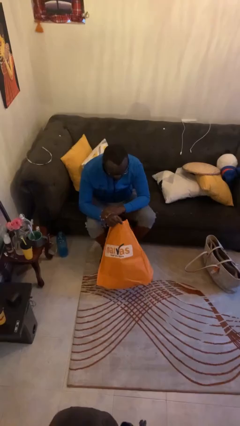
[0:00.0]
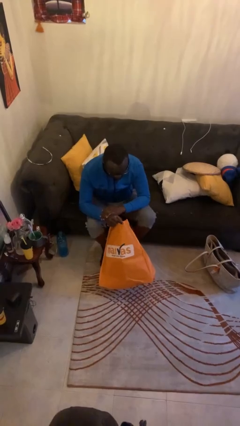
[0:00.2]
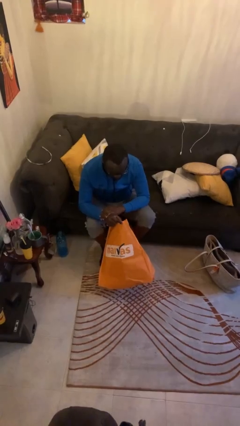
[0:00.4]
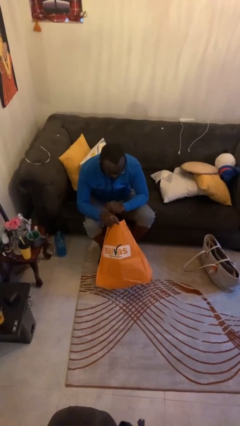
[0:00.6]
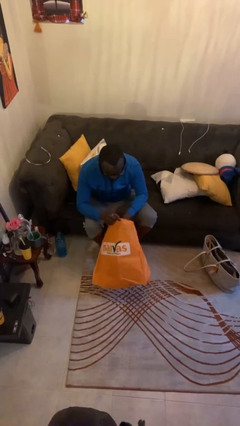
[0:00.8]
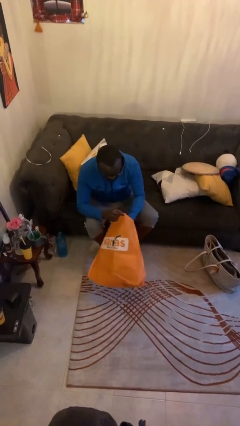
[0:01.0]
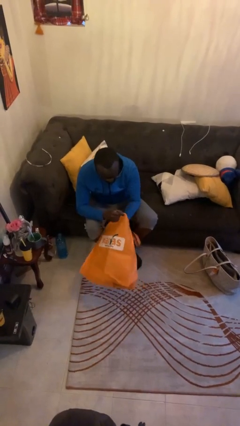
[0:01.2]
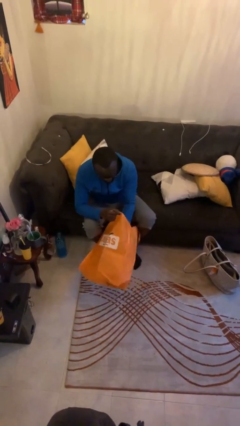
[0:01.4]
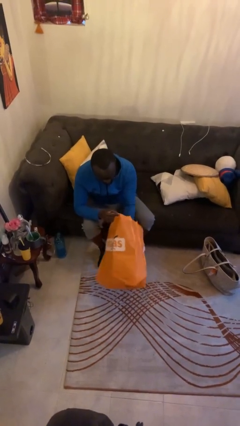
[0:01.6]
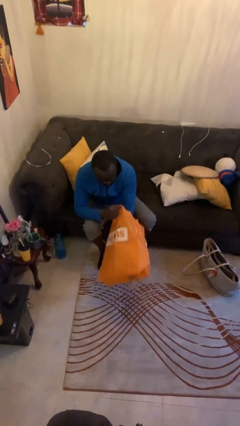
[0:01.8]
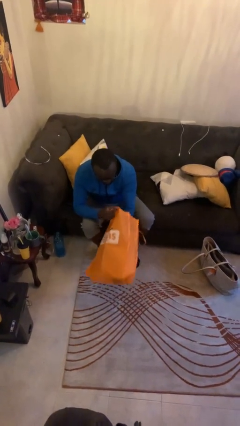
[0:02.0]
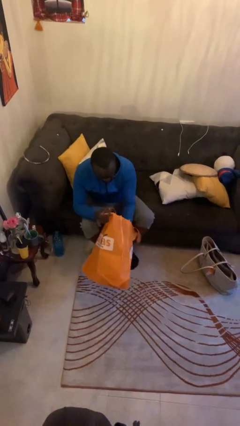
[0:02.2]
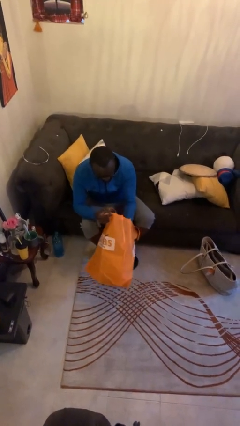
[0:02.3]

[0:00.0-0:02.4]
person searches in bag

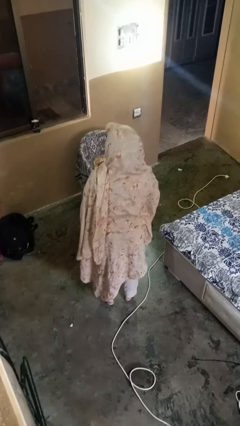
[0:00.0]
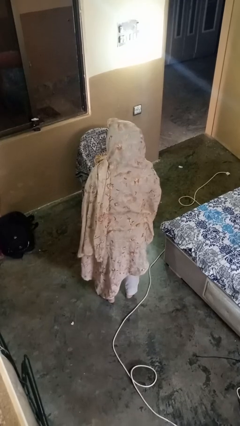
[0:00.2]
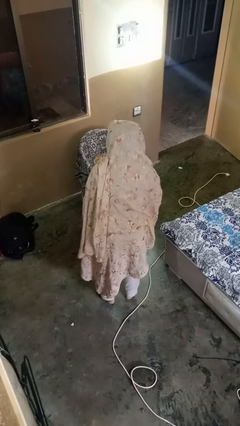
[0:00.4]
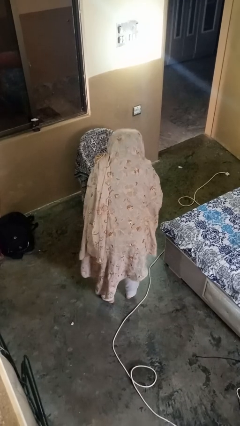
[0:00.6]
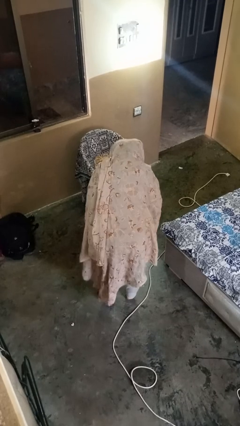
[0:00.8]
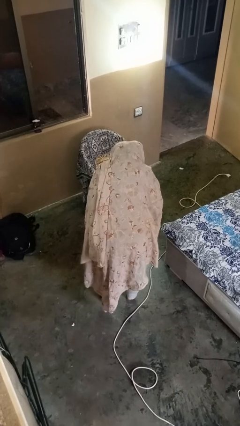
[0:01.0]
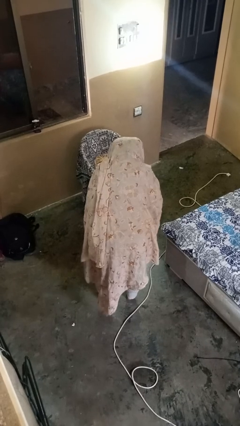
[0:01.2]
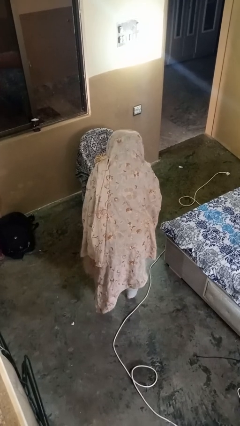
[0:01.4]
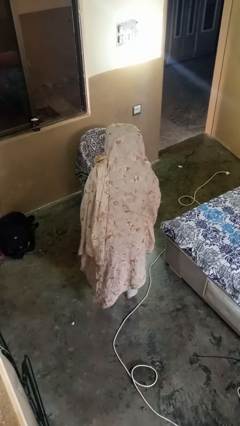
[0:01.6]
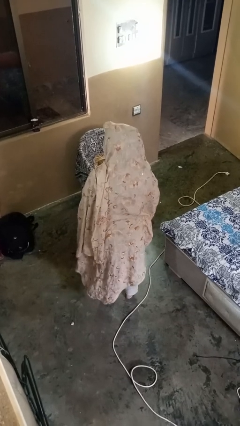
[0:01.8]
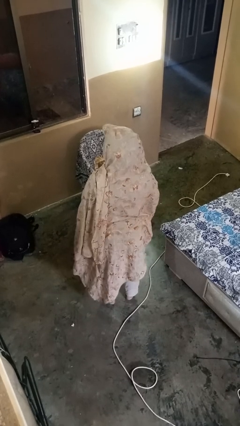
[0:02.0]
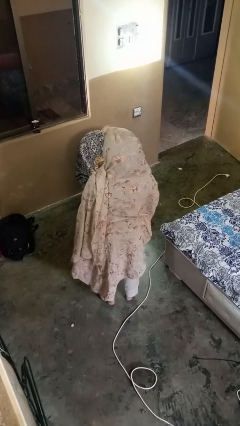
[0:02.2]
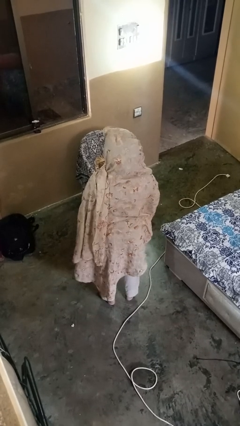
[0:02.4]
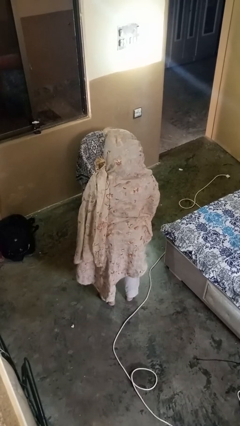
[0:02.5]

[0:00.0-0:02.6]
person bows

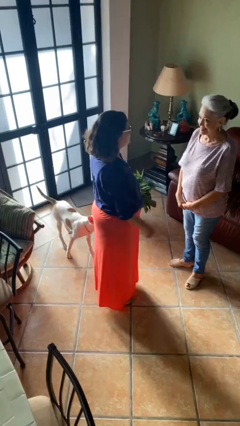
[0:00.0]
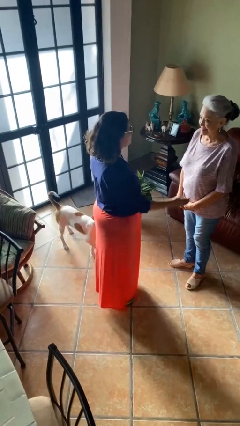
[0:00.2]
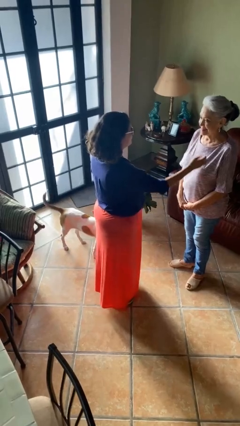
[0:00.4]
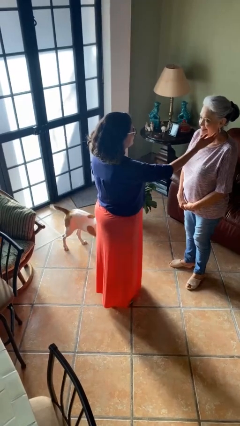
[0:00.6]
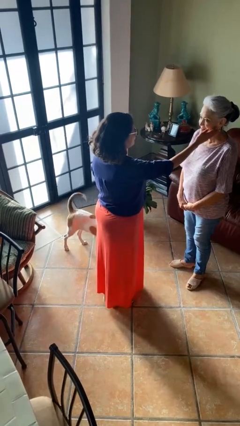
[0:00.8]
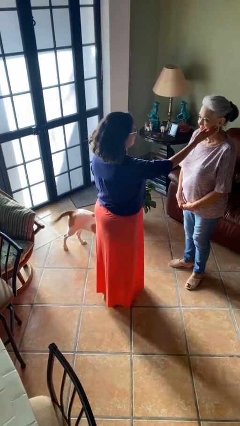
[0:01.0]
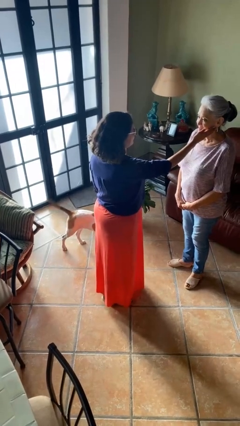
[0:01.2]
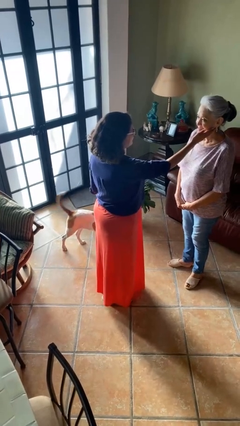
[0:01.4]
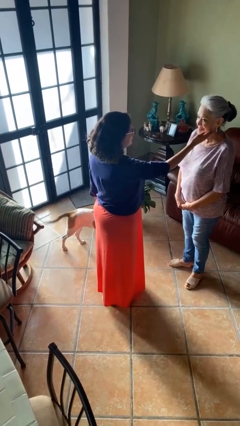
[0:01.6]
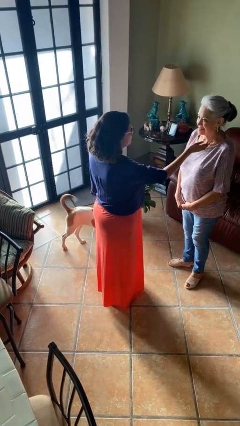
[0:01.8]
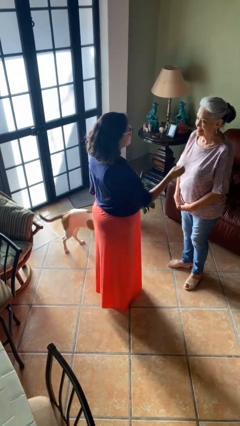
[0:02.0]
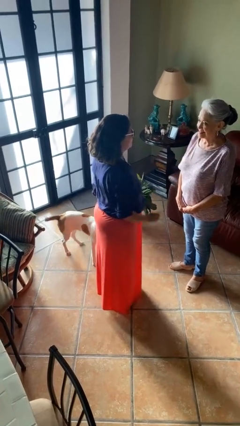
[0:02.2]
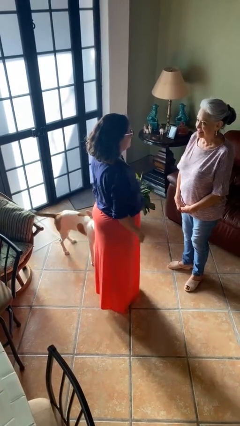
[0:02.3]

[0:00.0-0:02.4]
person touches face of person

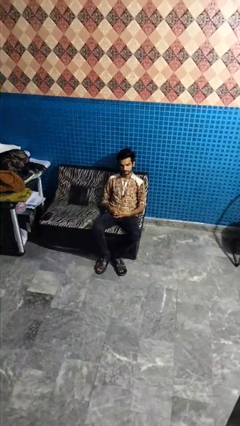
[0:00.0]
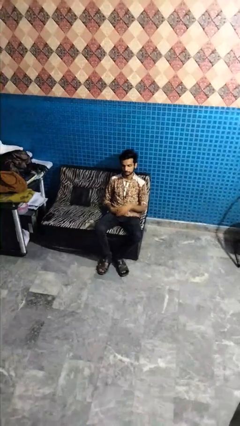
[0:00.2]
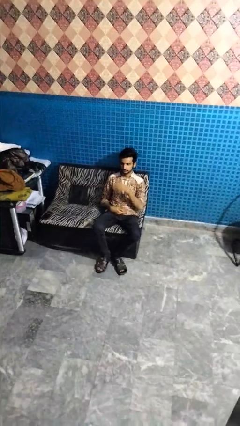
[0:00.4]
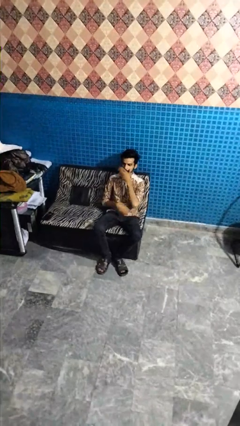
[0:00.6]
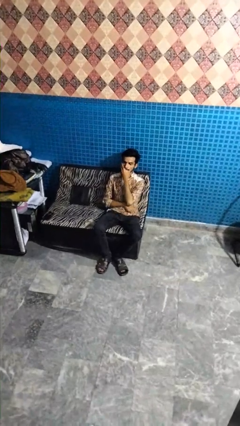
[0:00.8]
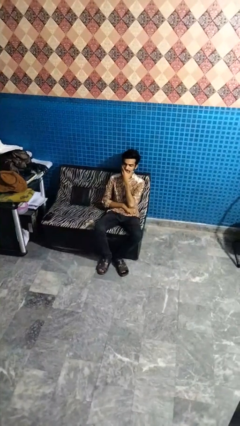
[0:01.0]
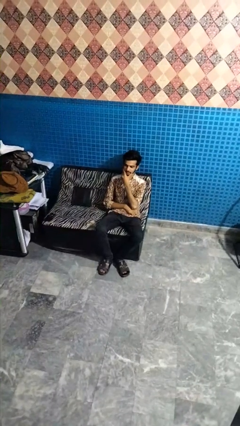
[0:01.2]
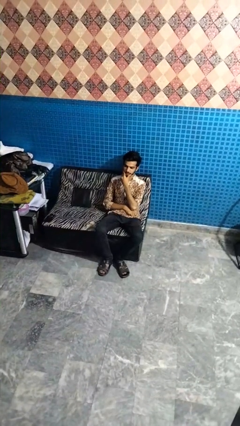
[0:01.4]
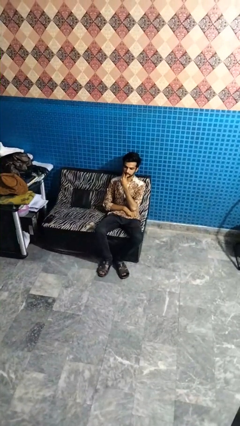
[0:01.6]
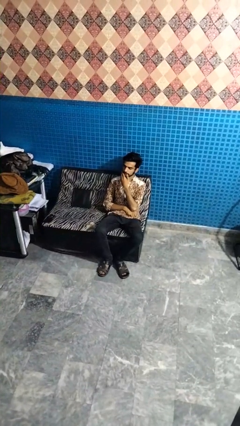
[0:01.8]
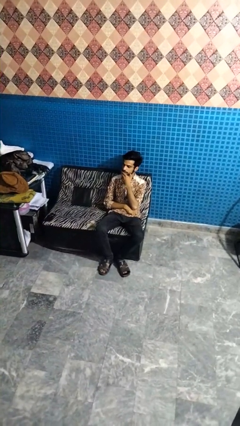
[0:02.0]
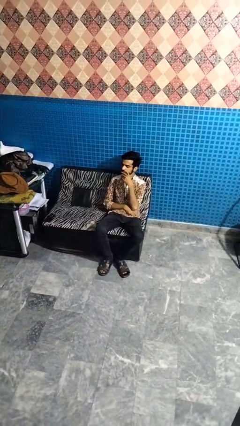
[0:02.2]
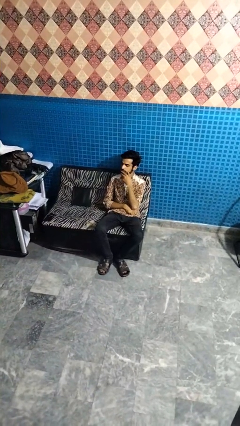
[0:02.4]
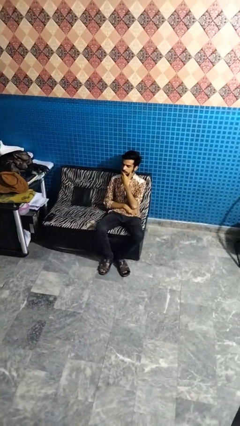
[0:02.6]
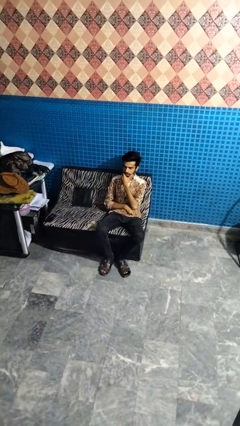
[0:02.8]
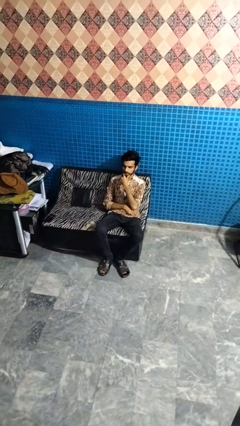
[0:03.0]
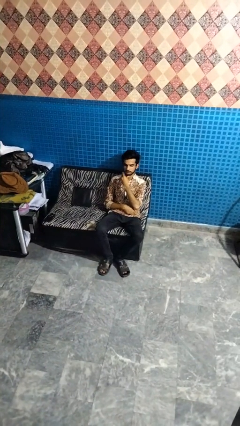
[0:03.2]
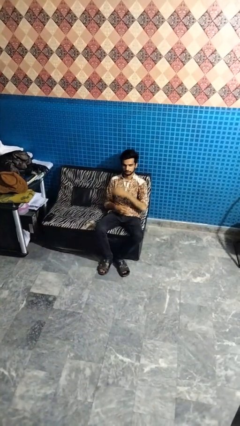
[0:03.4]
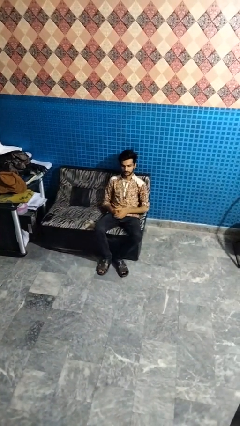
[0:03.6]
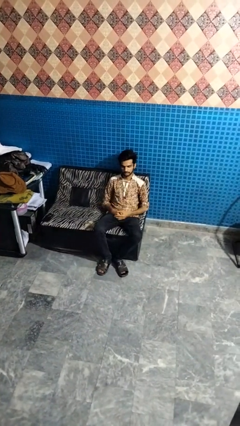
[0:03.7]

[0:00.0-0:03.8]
person strokes chin

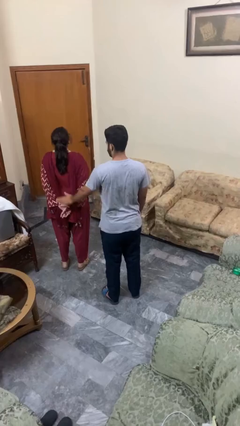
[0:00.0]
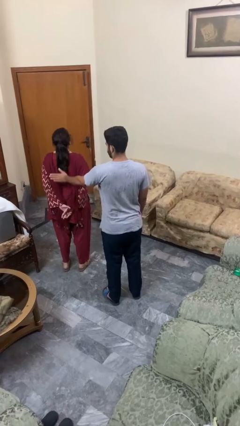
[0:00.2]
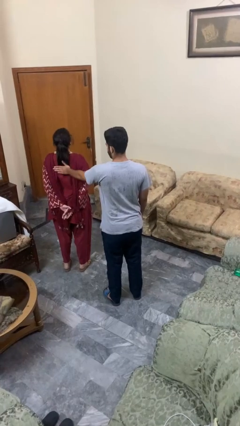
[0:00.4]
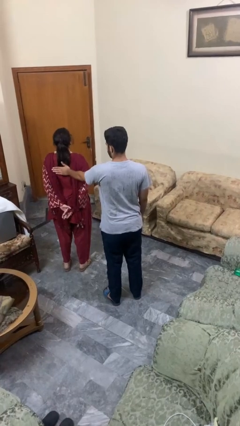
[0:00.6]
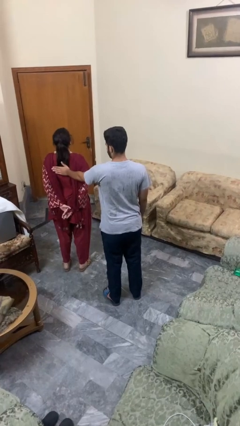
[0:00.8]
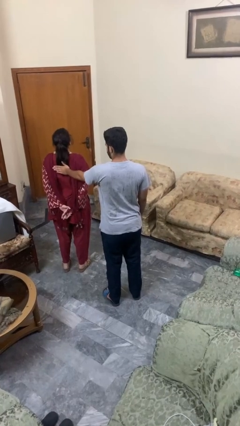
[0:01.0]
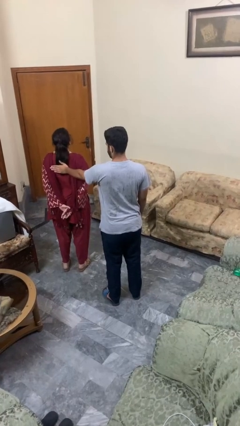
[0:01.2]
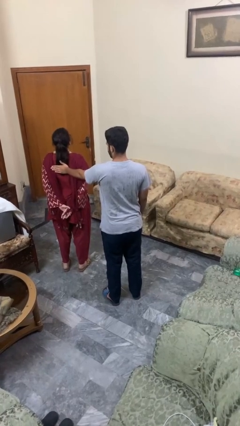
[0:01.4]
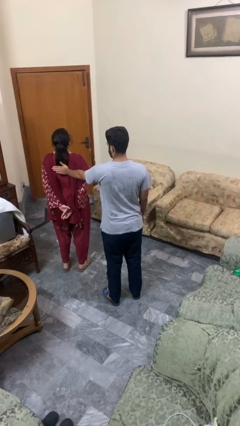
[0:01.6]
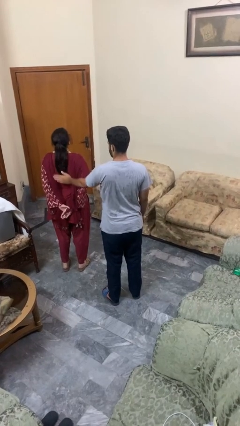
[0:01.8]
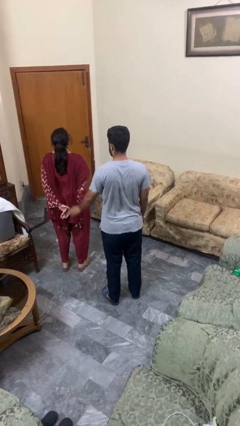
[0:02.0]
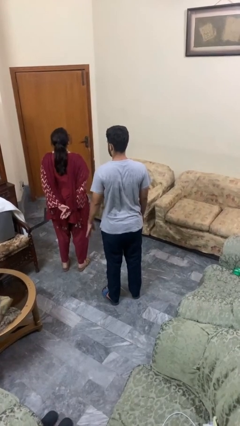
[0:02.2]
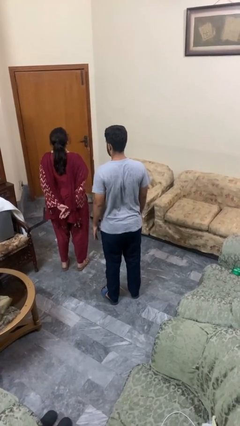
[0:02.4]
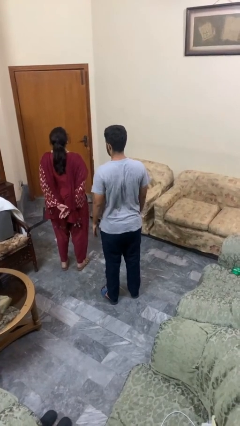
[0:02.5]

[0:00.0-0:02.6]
person touches back of person

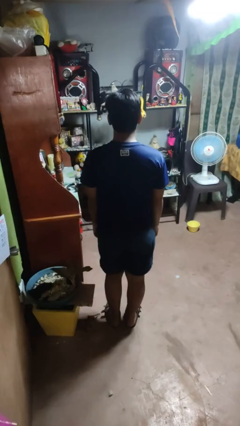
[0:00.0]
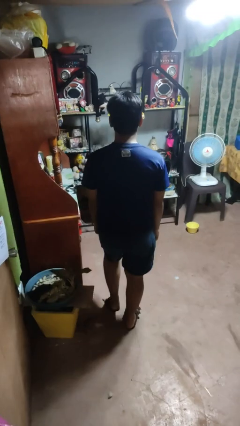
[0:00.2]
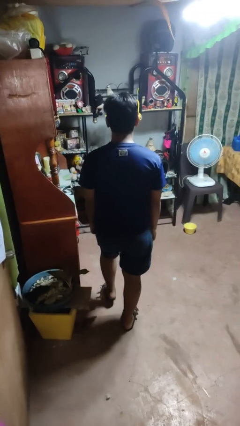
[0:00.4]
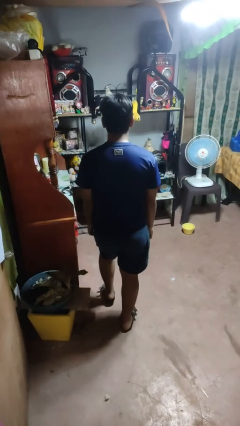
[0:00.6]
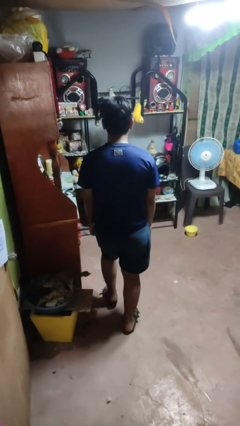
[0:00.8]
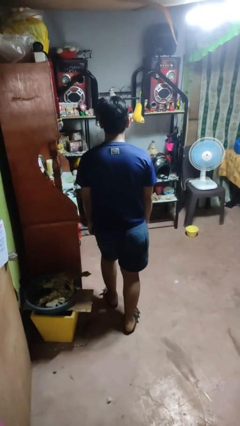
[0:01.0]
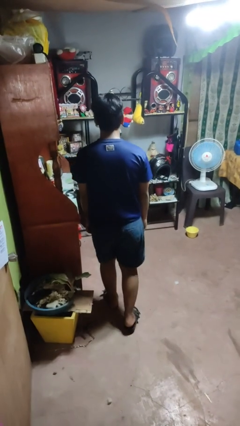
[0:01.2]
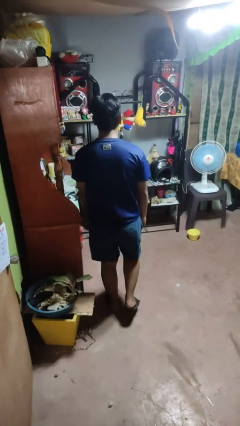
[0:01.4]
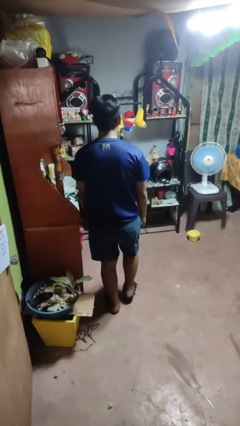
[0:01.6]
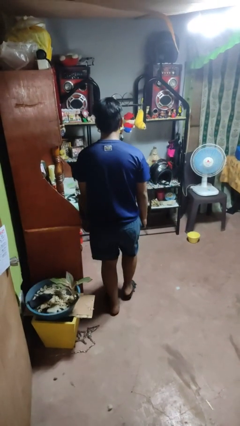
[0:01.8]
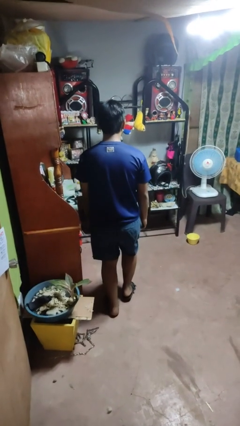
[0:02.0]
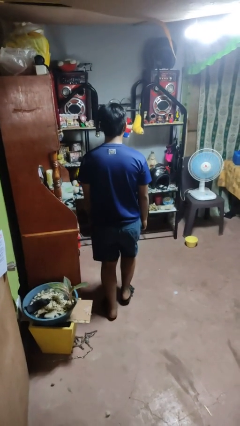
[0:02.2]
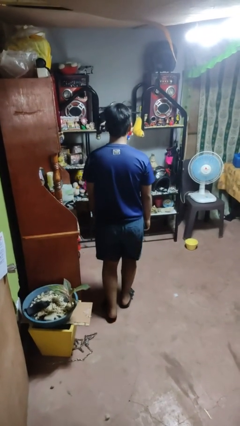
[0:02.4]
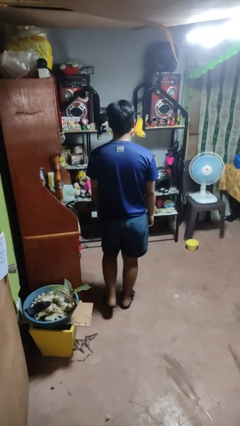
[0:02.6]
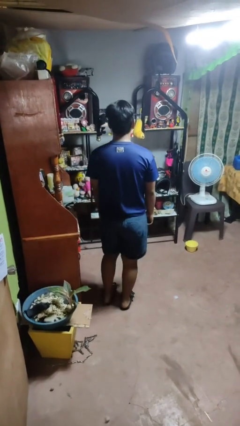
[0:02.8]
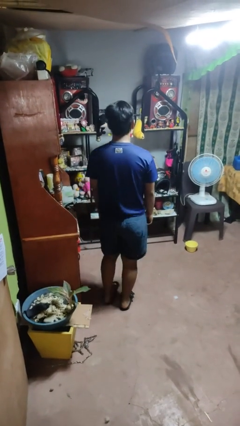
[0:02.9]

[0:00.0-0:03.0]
person walks tiptoe

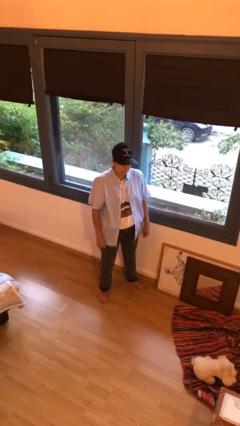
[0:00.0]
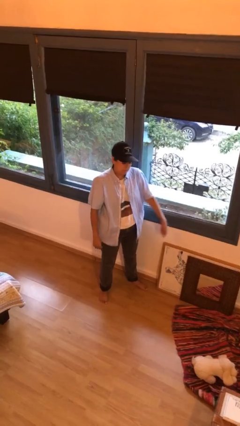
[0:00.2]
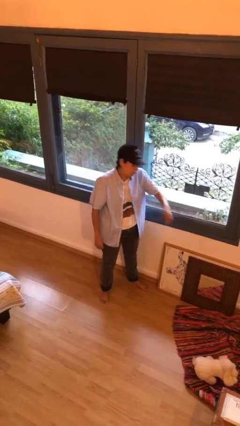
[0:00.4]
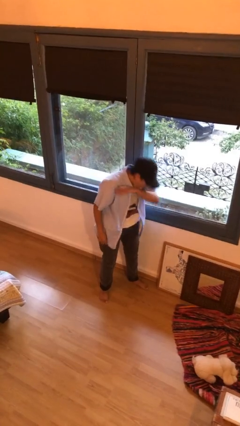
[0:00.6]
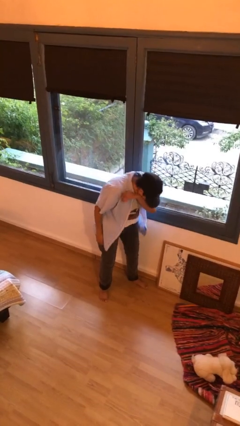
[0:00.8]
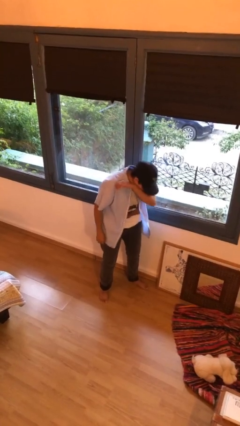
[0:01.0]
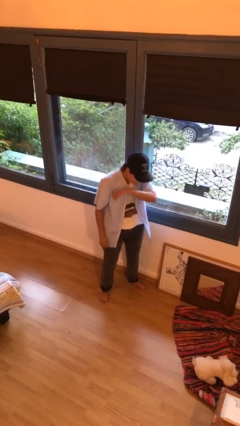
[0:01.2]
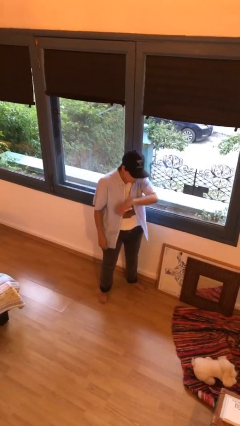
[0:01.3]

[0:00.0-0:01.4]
person sneezes into arm
